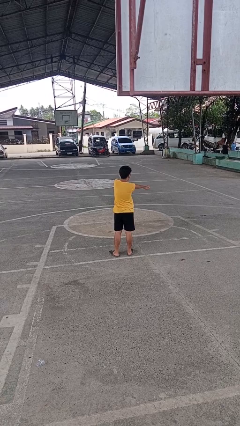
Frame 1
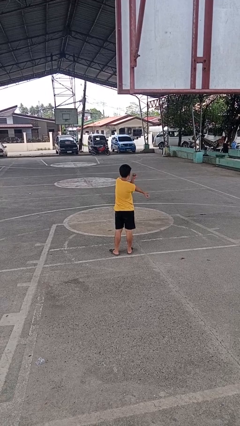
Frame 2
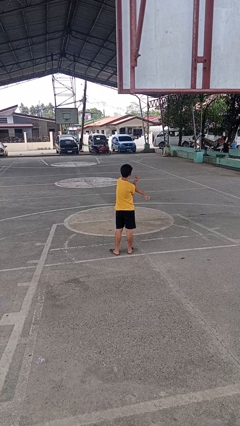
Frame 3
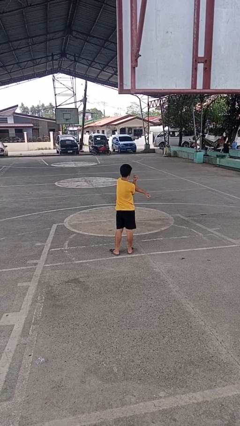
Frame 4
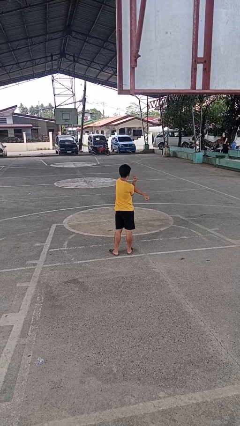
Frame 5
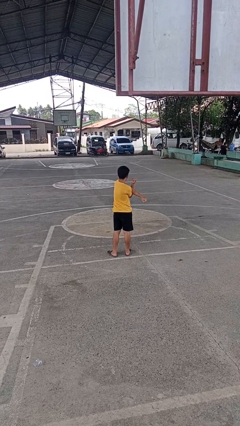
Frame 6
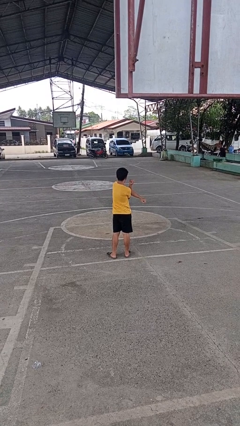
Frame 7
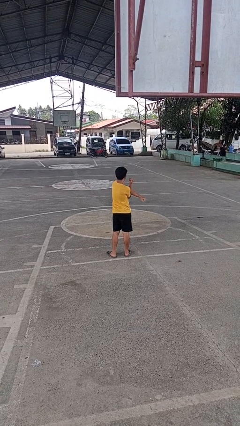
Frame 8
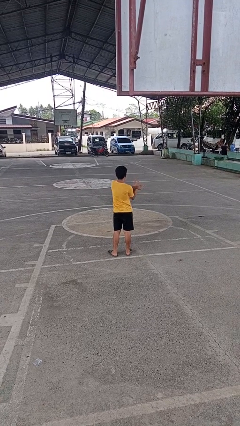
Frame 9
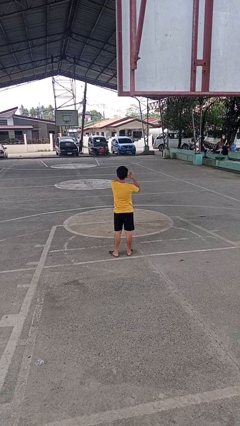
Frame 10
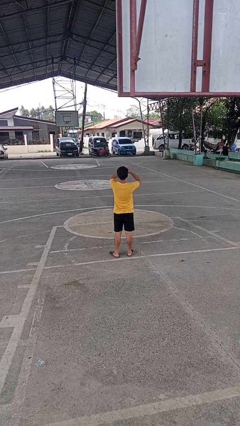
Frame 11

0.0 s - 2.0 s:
person stretches arms to side

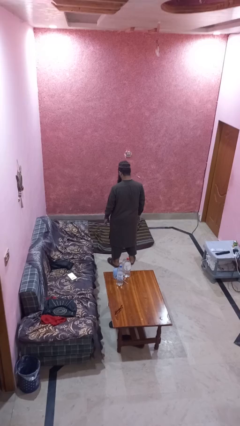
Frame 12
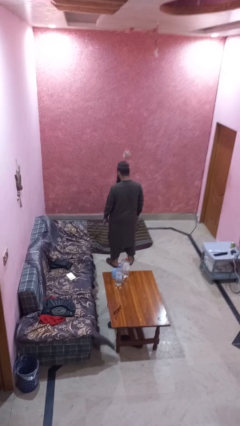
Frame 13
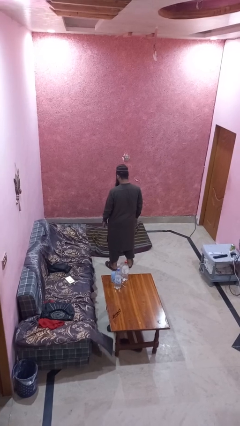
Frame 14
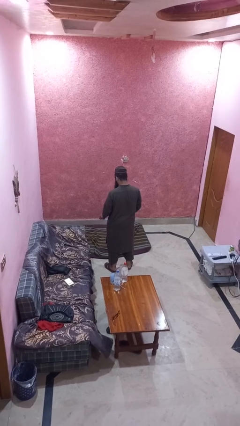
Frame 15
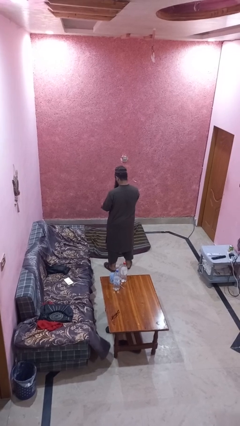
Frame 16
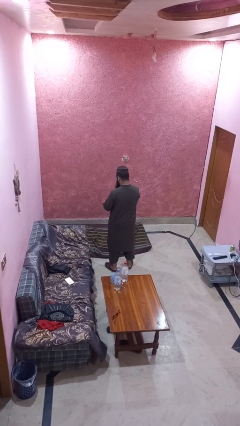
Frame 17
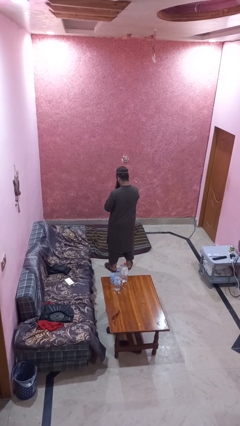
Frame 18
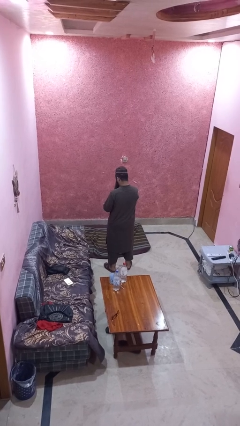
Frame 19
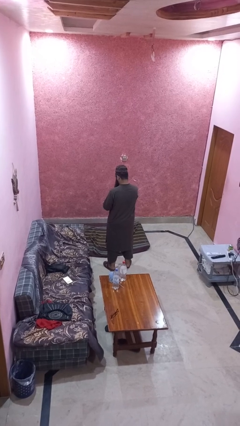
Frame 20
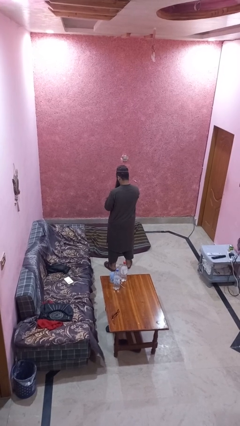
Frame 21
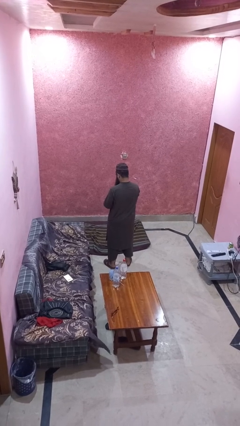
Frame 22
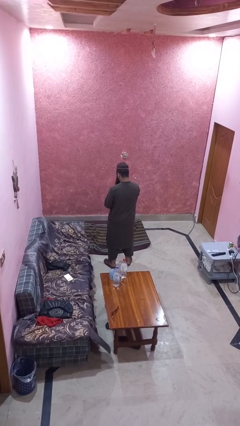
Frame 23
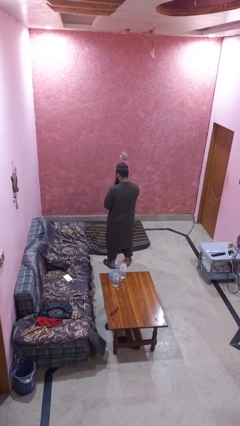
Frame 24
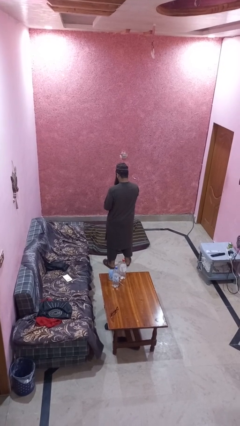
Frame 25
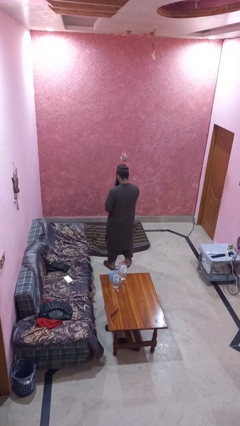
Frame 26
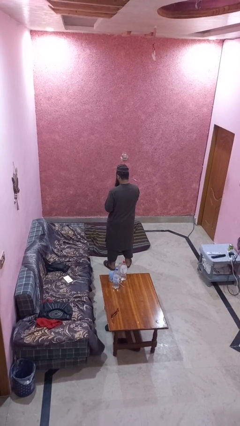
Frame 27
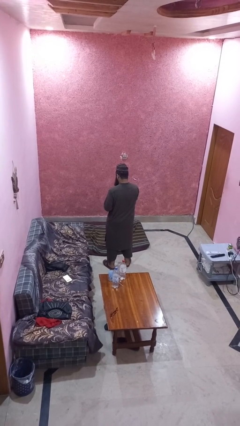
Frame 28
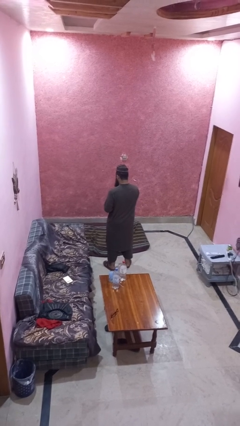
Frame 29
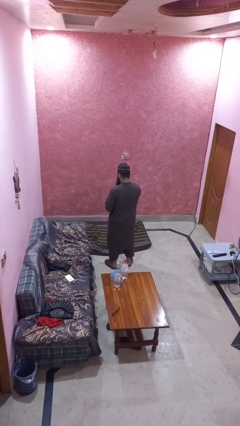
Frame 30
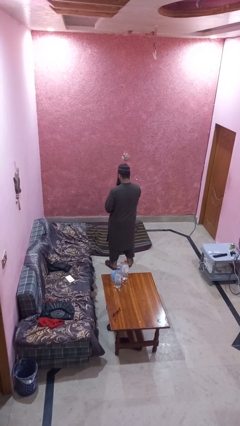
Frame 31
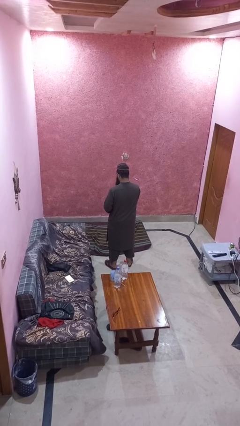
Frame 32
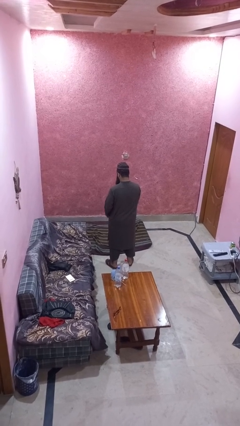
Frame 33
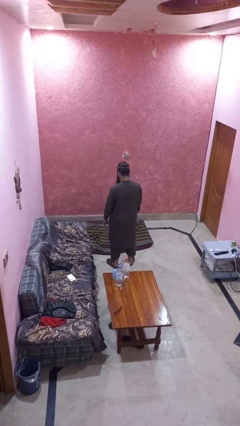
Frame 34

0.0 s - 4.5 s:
person takes off wristwatch

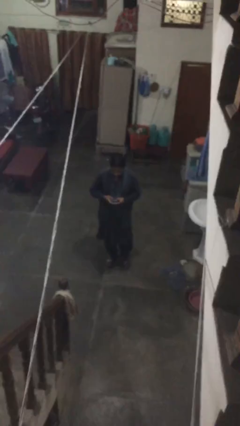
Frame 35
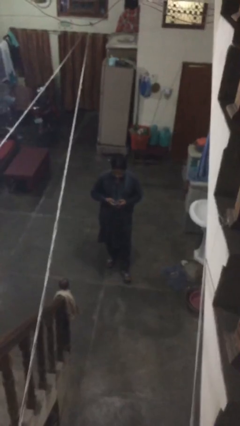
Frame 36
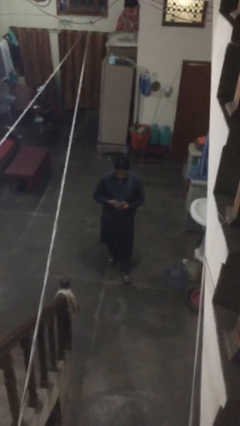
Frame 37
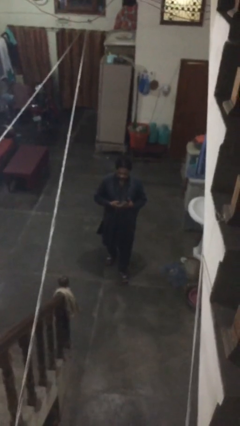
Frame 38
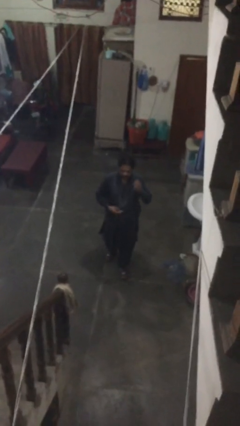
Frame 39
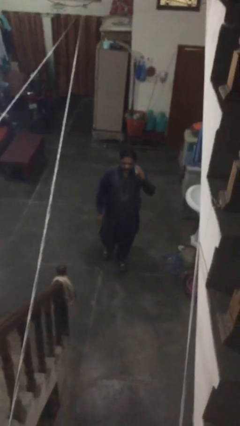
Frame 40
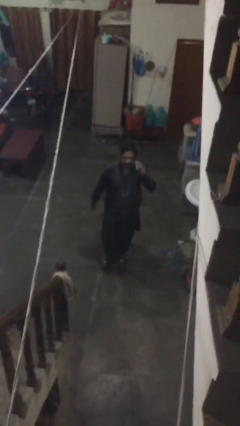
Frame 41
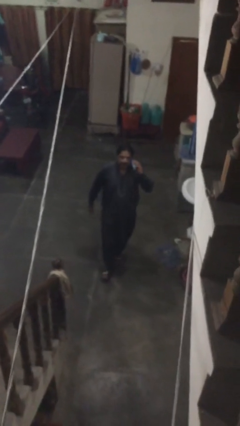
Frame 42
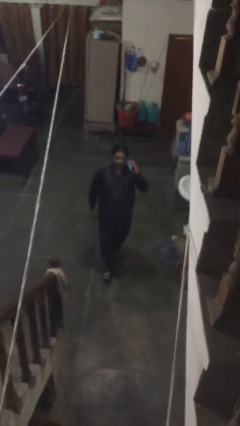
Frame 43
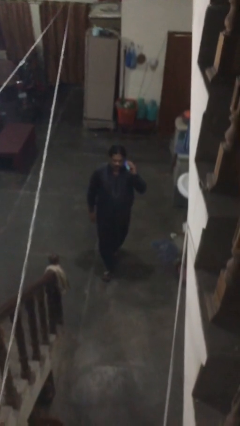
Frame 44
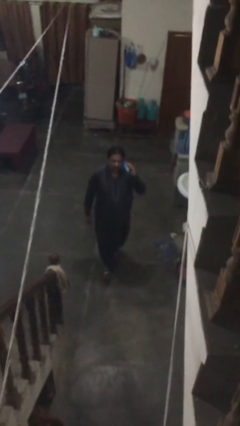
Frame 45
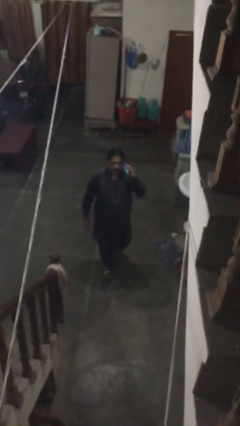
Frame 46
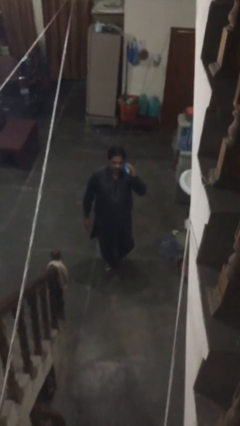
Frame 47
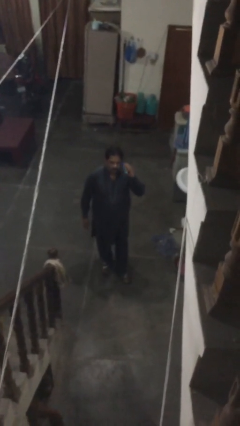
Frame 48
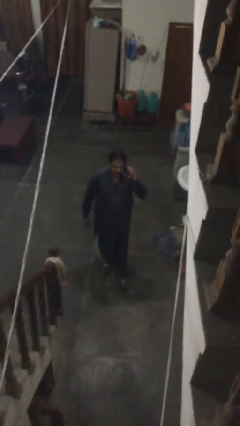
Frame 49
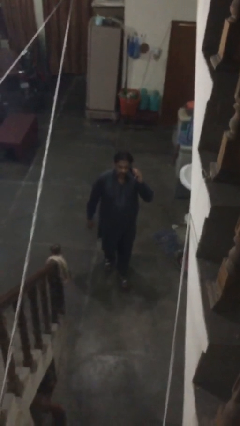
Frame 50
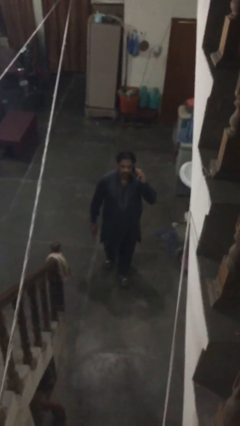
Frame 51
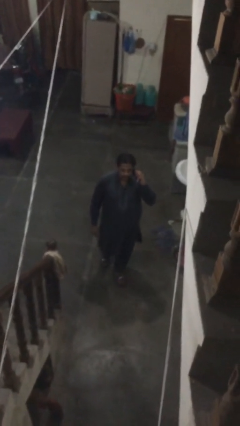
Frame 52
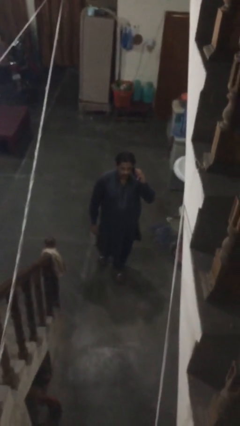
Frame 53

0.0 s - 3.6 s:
person talks on phone

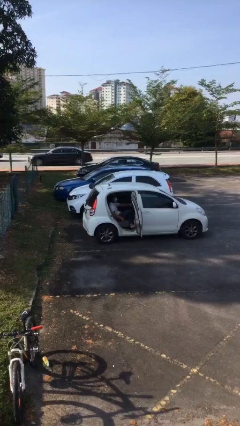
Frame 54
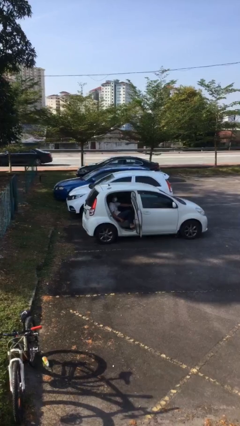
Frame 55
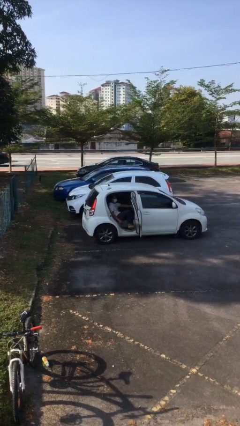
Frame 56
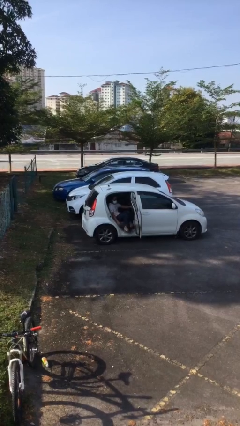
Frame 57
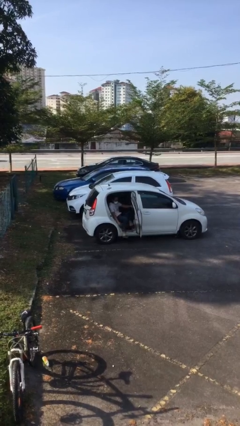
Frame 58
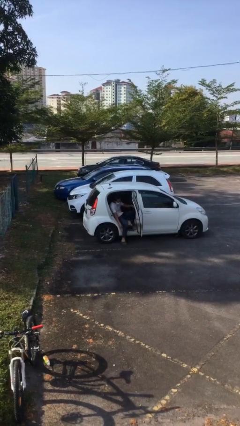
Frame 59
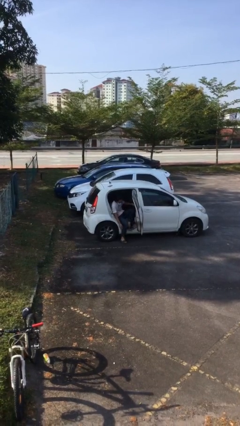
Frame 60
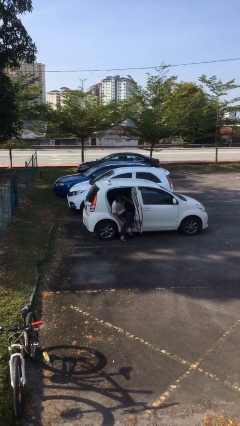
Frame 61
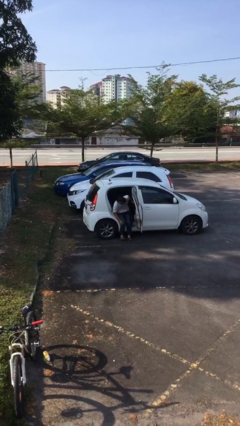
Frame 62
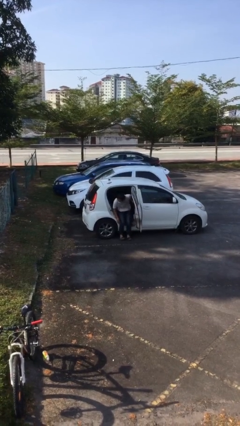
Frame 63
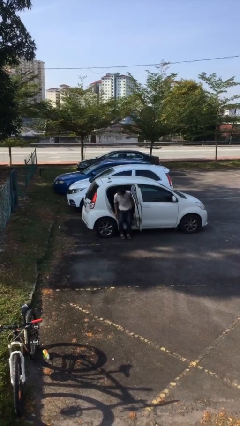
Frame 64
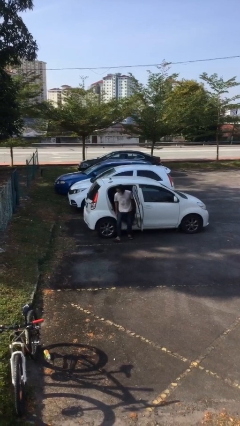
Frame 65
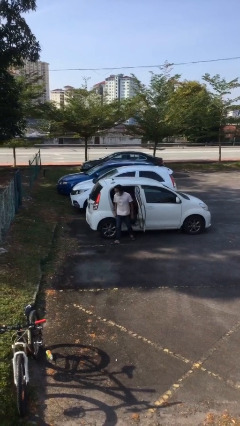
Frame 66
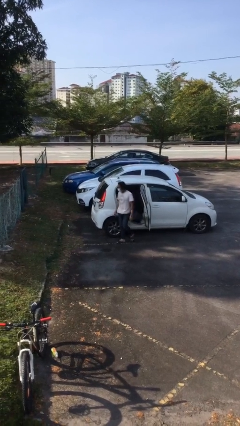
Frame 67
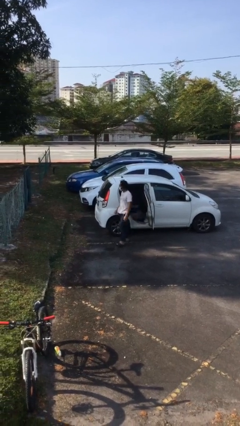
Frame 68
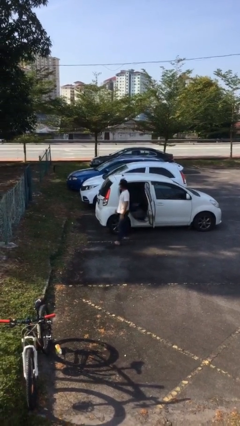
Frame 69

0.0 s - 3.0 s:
person exits car

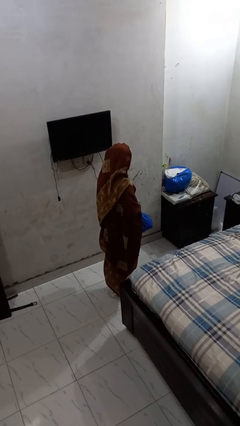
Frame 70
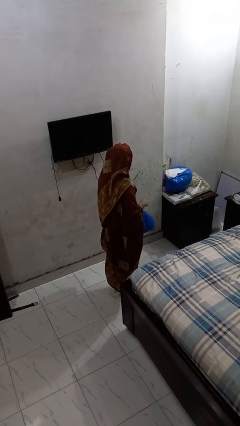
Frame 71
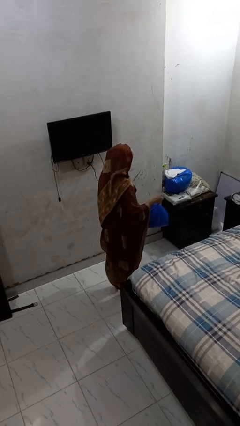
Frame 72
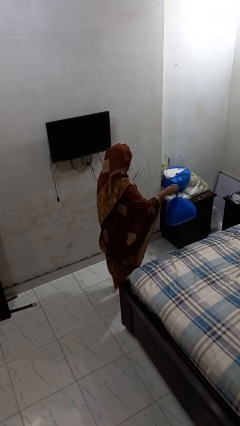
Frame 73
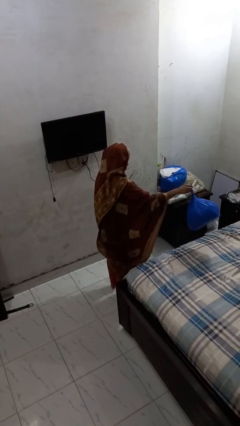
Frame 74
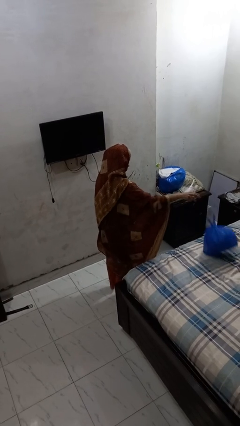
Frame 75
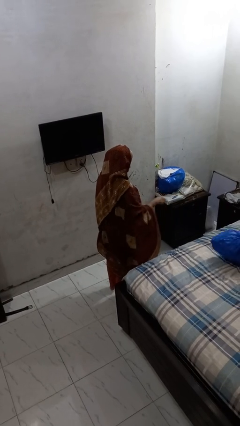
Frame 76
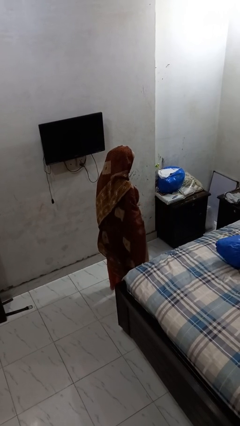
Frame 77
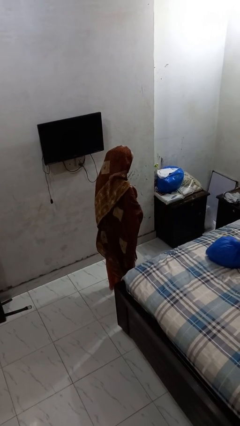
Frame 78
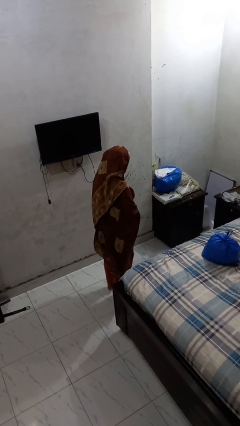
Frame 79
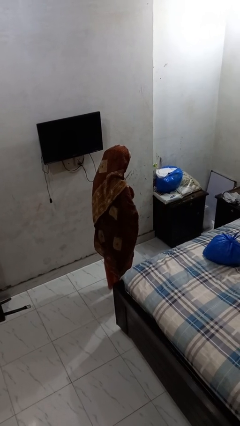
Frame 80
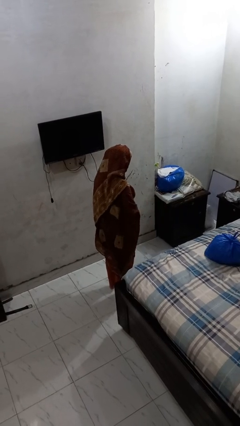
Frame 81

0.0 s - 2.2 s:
person throws object on bed

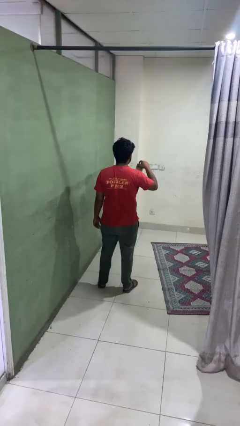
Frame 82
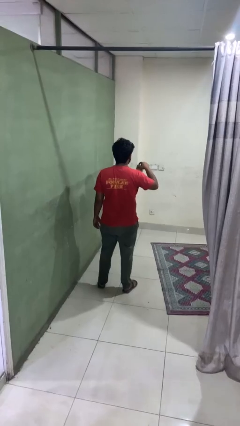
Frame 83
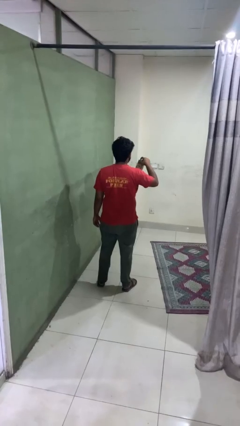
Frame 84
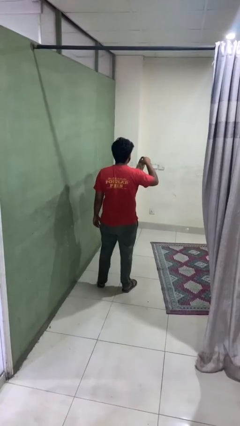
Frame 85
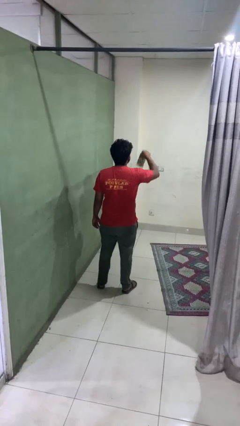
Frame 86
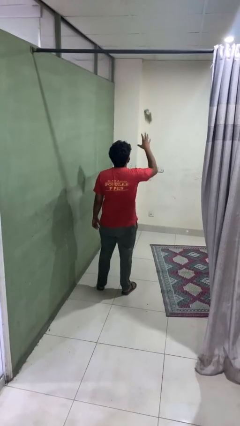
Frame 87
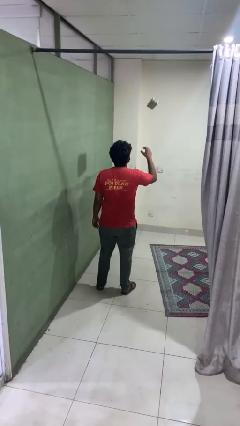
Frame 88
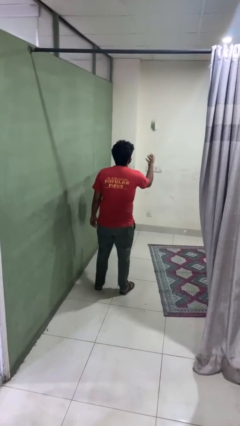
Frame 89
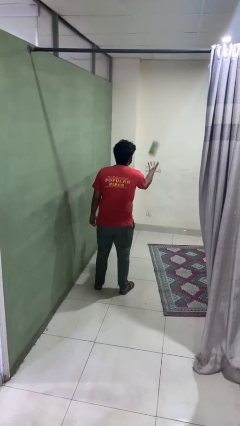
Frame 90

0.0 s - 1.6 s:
person drops object

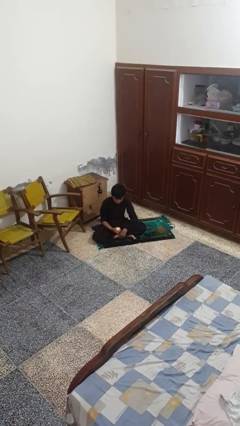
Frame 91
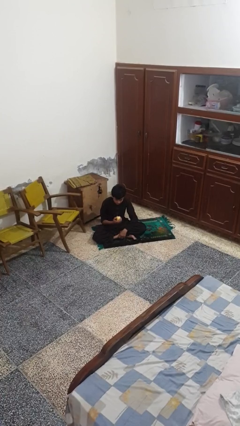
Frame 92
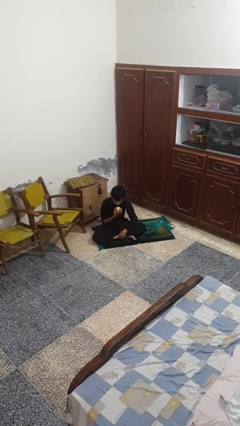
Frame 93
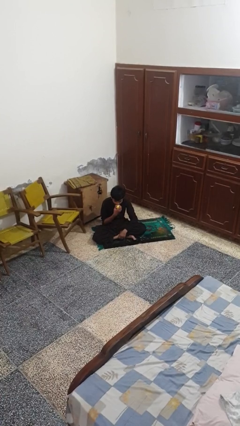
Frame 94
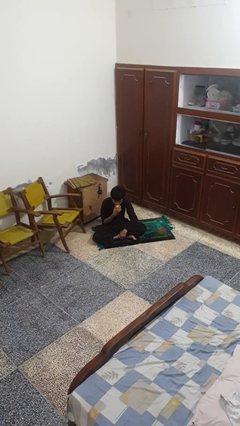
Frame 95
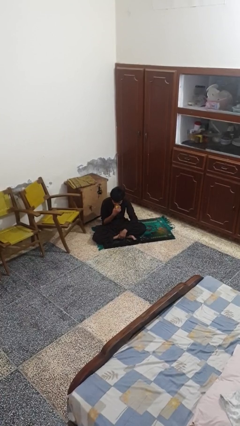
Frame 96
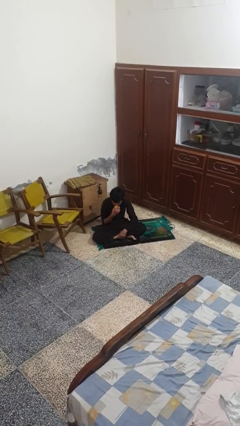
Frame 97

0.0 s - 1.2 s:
person eats apple
